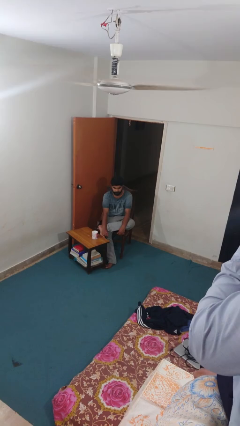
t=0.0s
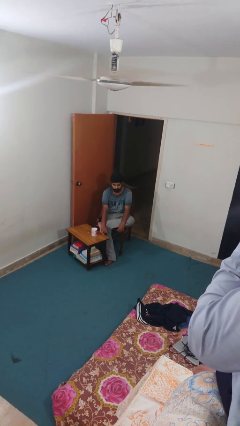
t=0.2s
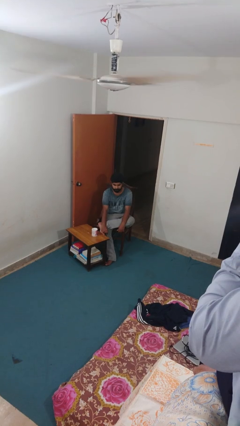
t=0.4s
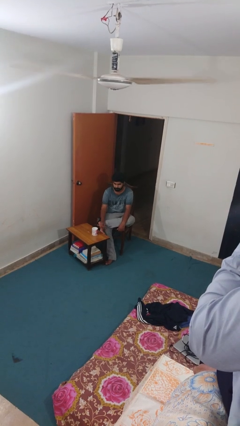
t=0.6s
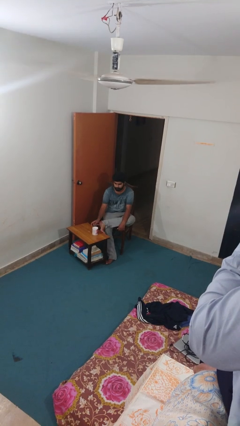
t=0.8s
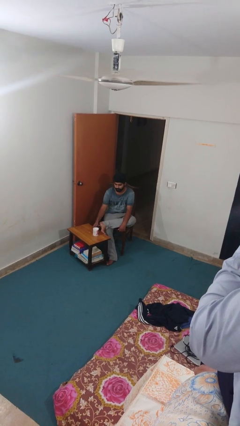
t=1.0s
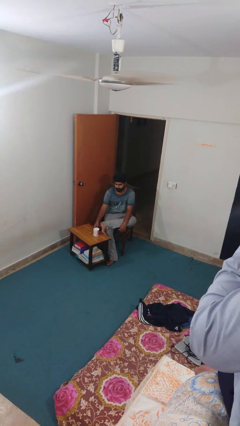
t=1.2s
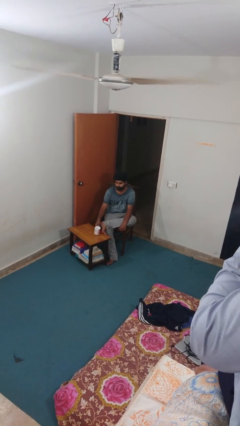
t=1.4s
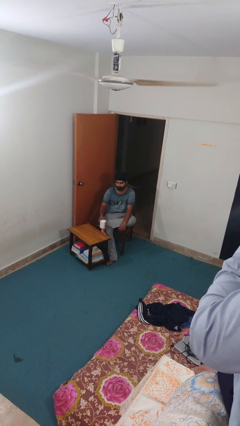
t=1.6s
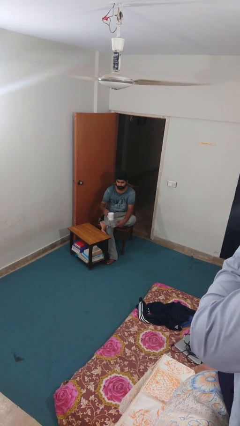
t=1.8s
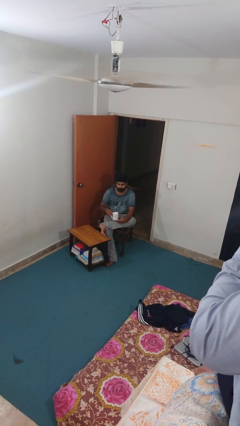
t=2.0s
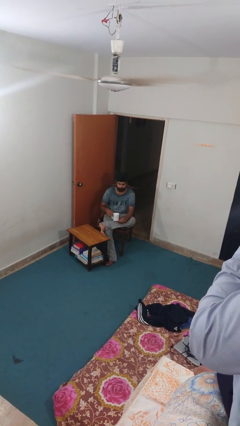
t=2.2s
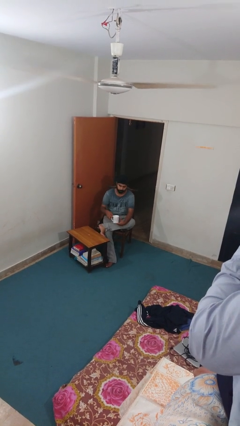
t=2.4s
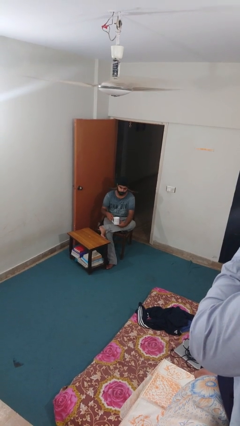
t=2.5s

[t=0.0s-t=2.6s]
person picks up object from table

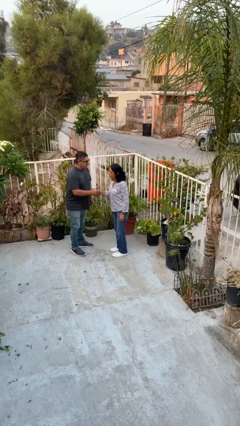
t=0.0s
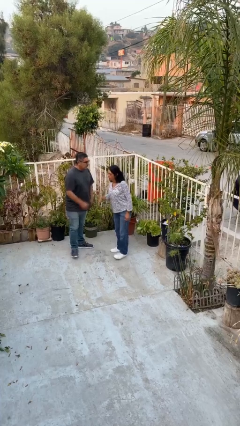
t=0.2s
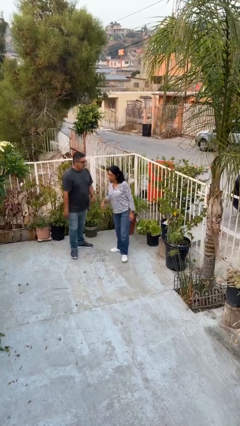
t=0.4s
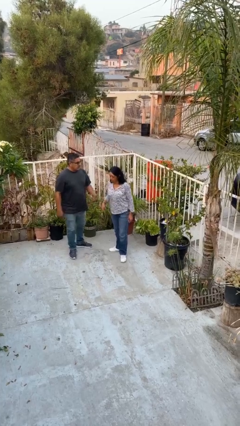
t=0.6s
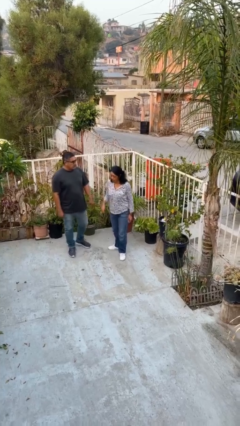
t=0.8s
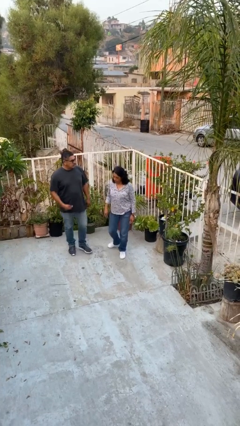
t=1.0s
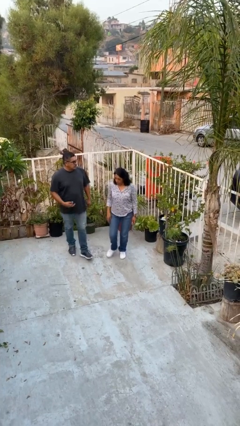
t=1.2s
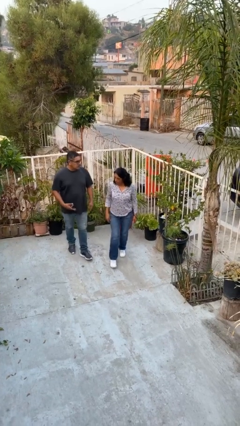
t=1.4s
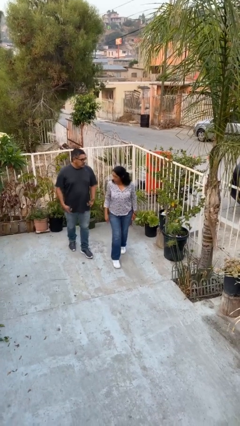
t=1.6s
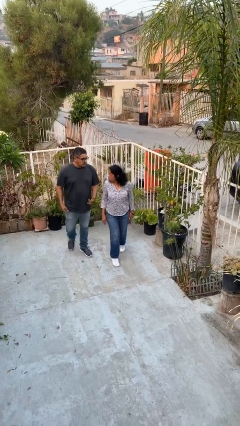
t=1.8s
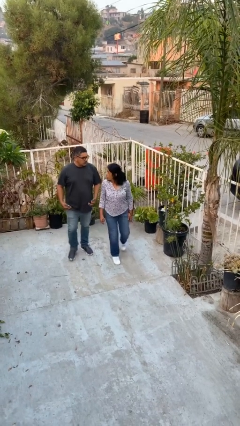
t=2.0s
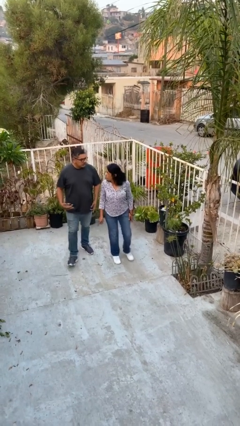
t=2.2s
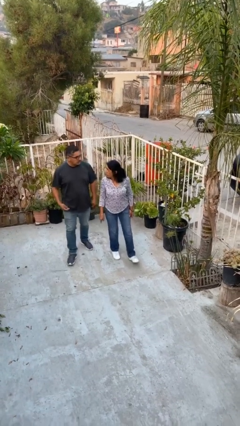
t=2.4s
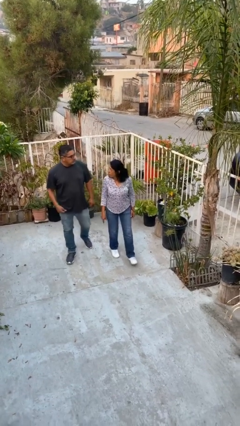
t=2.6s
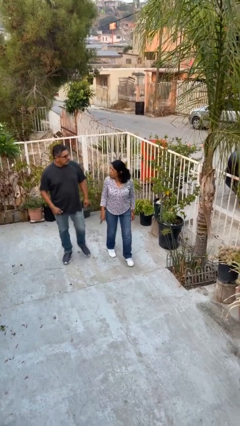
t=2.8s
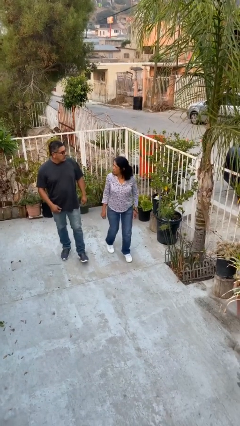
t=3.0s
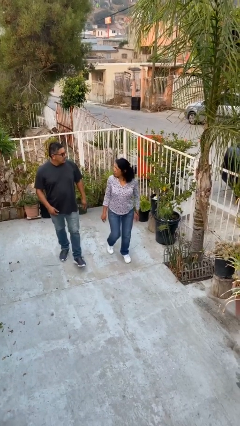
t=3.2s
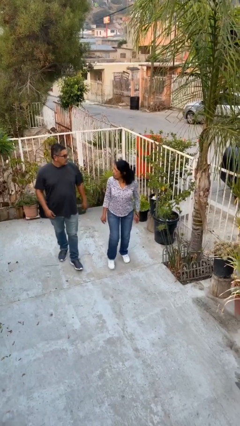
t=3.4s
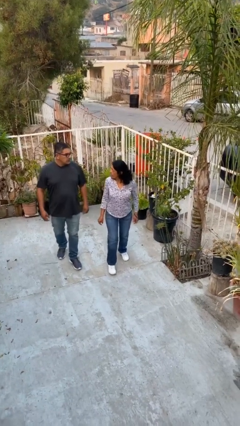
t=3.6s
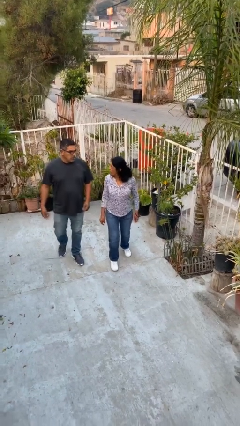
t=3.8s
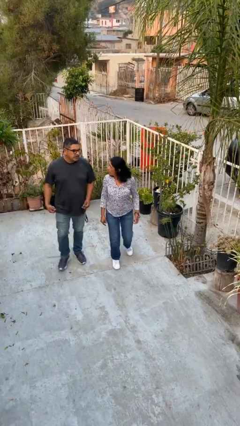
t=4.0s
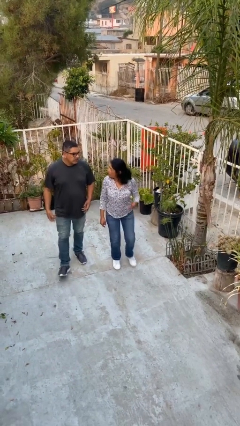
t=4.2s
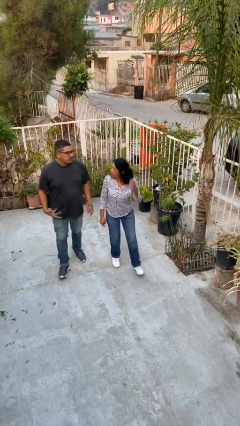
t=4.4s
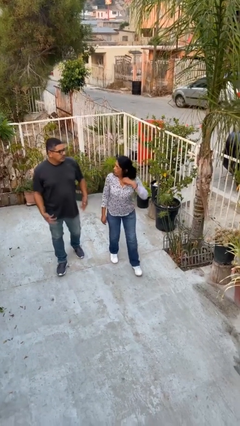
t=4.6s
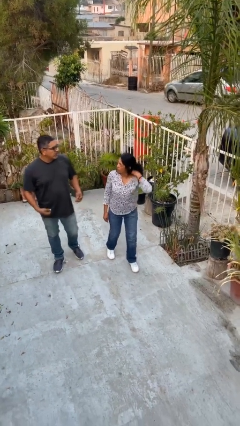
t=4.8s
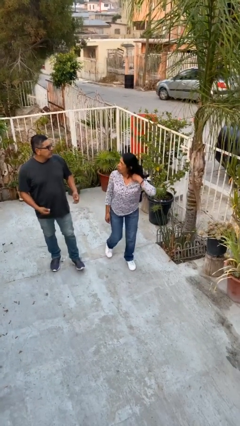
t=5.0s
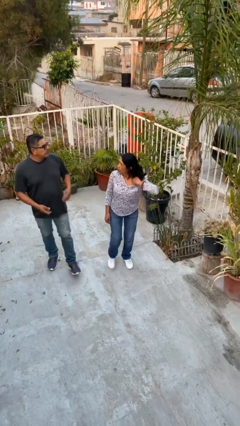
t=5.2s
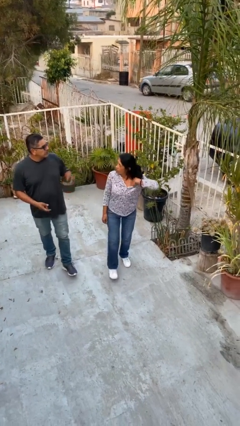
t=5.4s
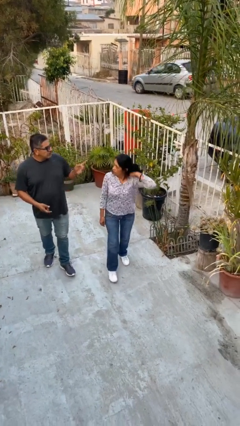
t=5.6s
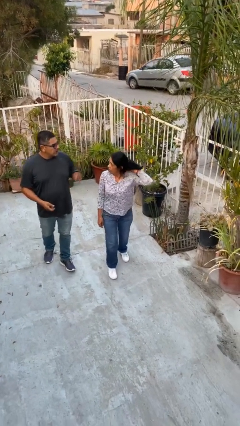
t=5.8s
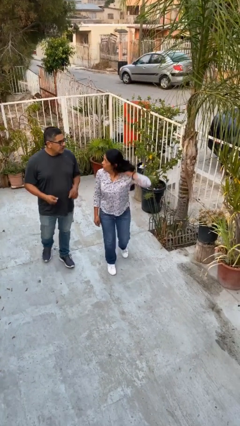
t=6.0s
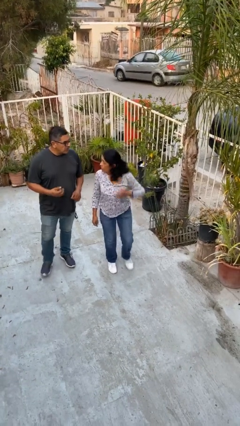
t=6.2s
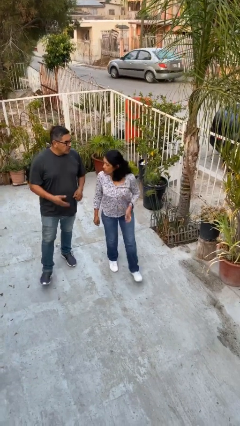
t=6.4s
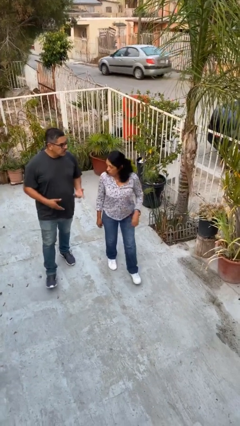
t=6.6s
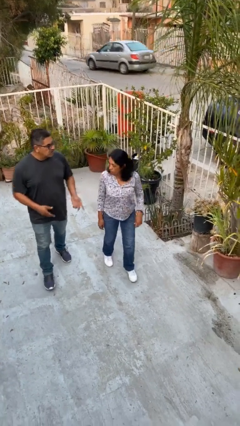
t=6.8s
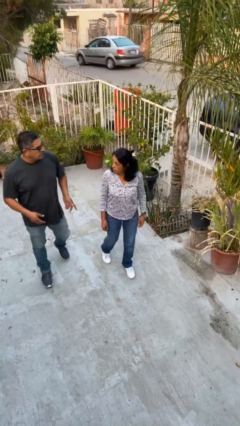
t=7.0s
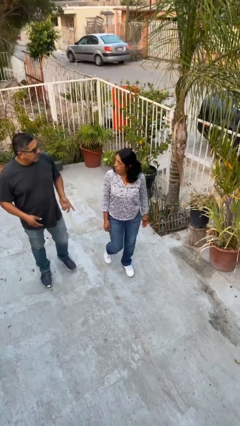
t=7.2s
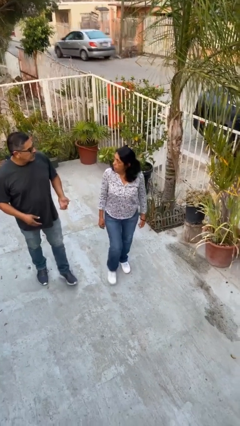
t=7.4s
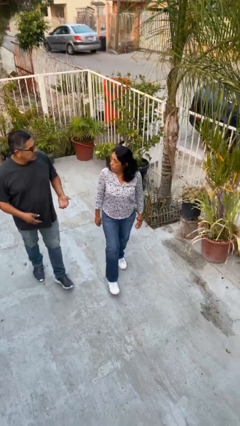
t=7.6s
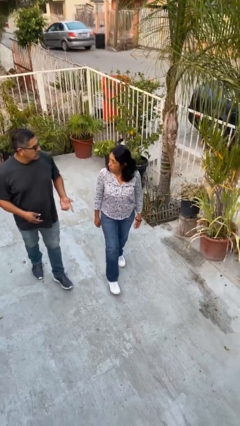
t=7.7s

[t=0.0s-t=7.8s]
person talks to person

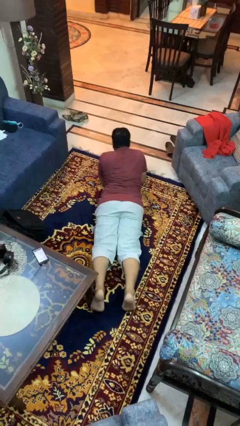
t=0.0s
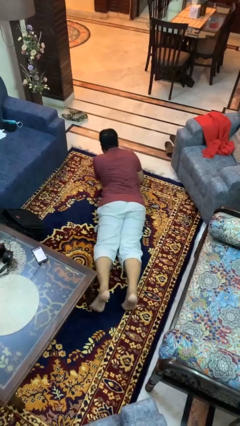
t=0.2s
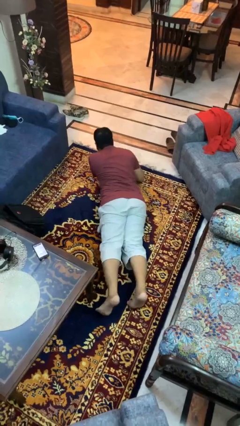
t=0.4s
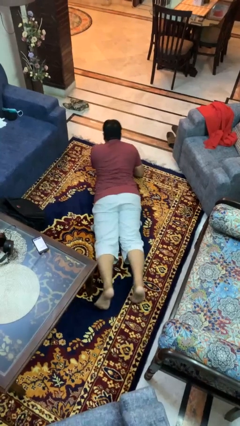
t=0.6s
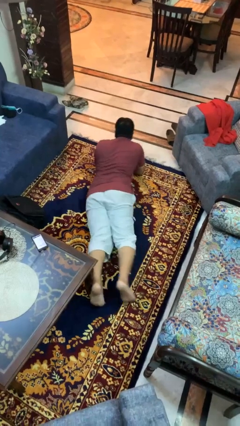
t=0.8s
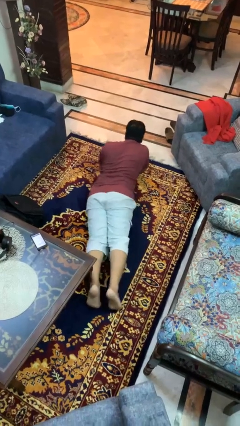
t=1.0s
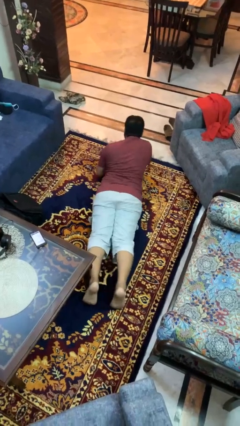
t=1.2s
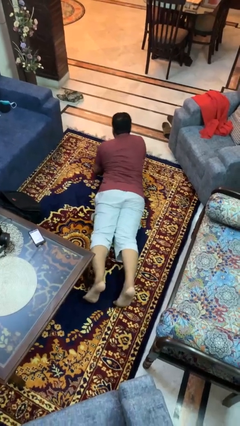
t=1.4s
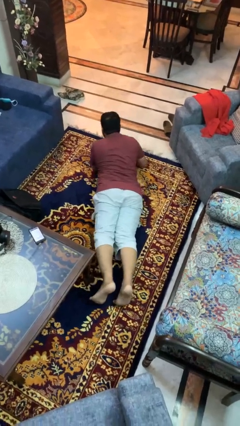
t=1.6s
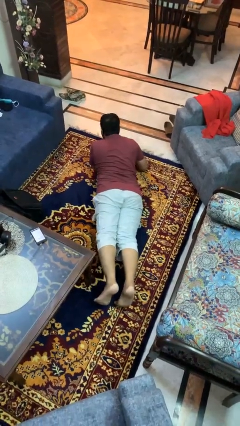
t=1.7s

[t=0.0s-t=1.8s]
person crawls

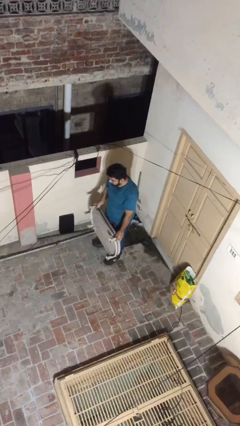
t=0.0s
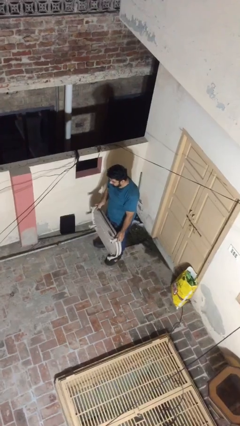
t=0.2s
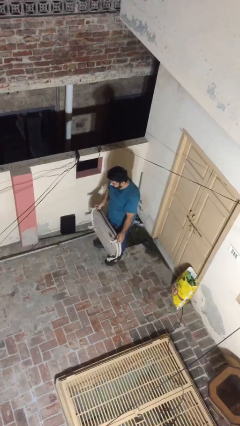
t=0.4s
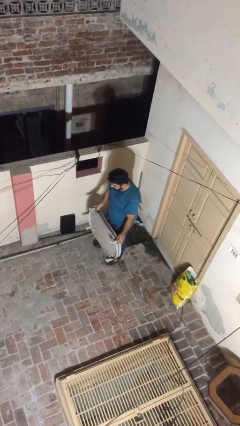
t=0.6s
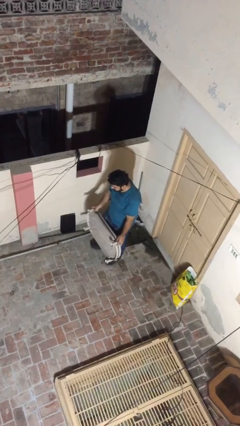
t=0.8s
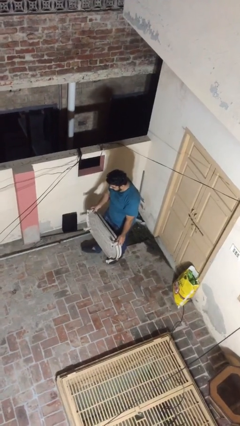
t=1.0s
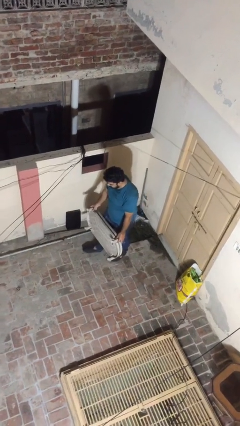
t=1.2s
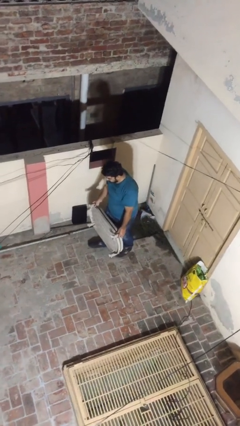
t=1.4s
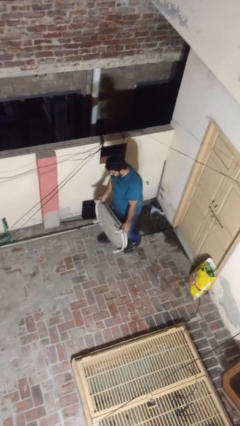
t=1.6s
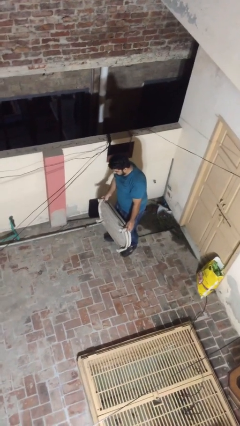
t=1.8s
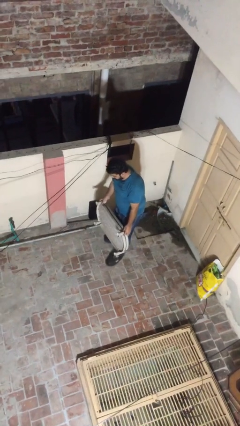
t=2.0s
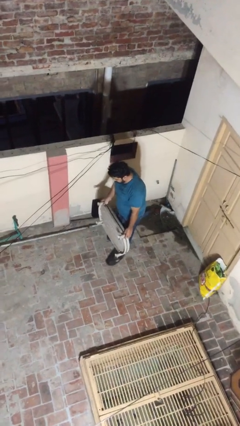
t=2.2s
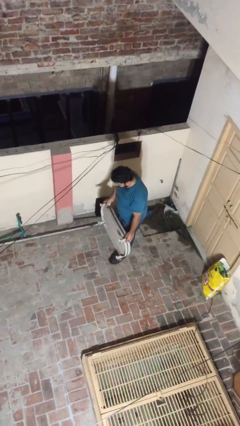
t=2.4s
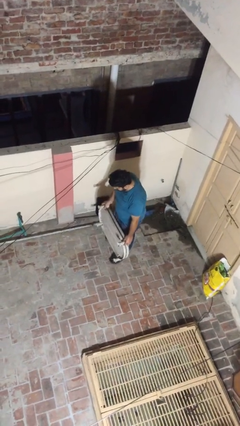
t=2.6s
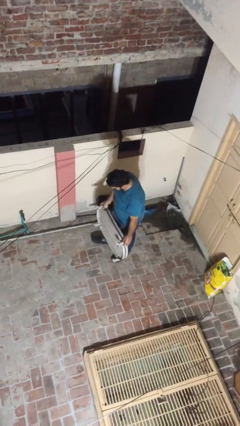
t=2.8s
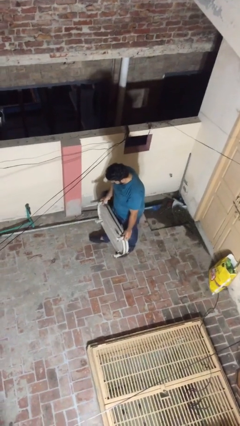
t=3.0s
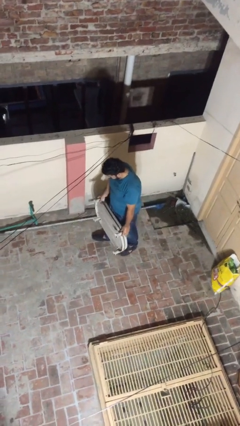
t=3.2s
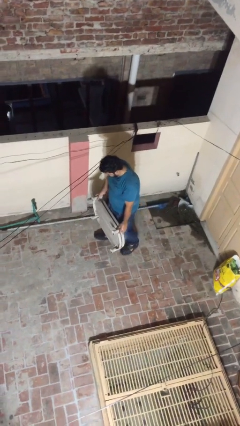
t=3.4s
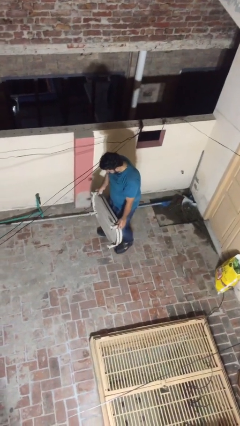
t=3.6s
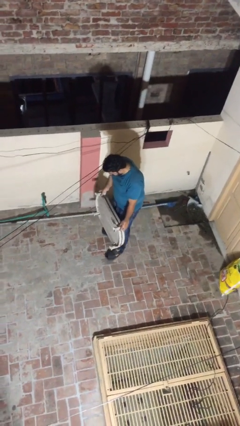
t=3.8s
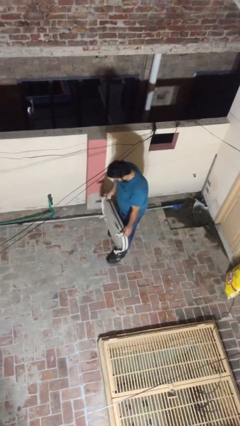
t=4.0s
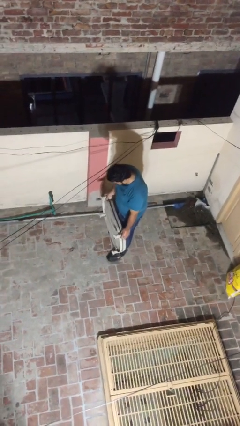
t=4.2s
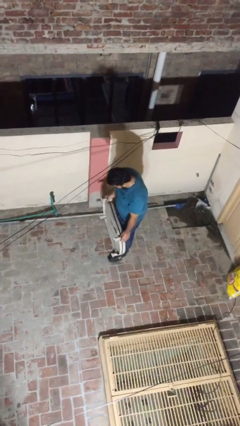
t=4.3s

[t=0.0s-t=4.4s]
person carries heavy object

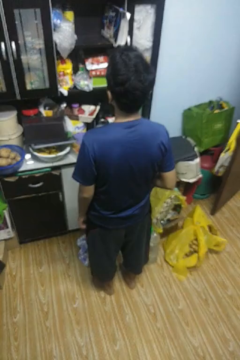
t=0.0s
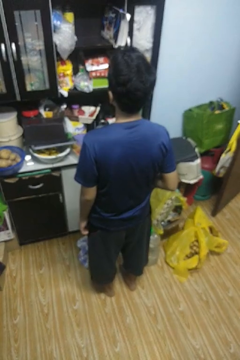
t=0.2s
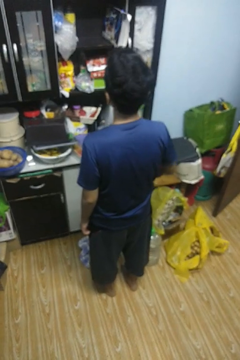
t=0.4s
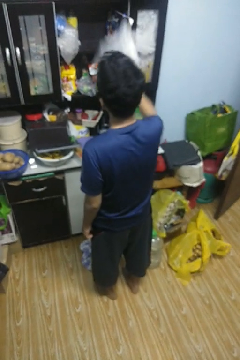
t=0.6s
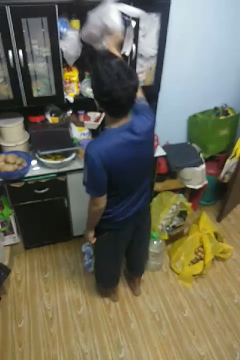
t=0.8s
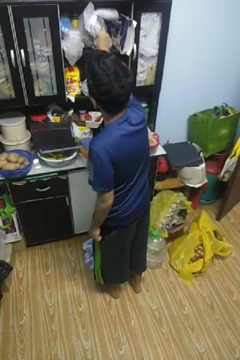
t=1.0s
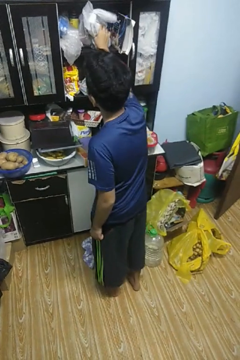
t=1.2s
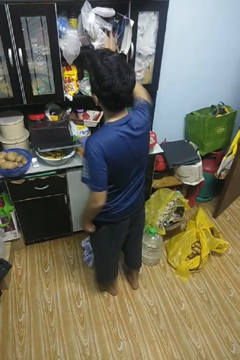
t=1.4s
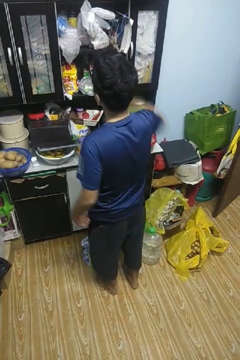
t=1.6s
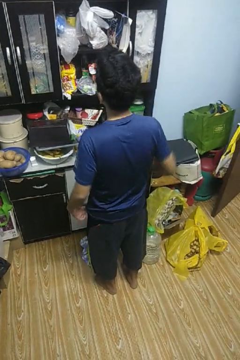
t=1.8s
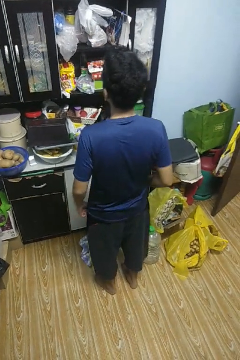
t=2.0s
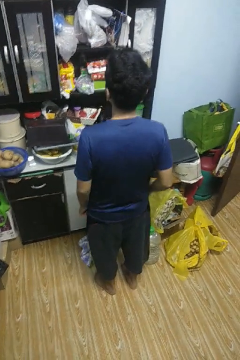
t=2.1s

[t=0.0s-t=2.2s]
person loads groceries into cabinet
